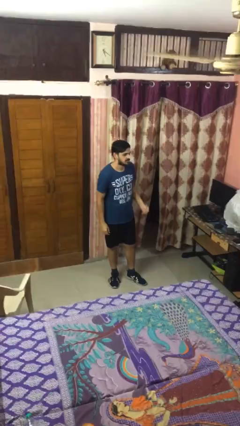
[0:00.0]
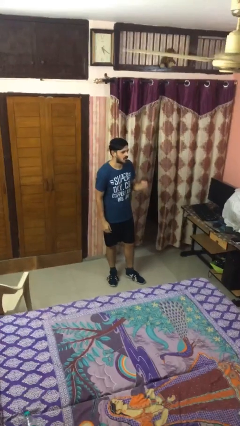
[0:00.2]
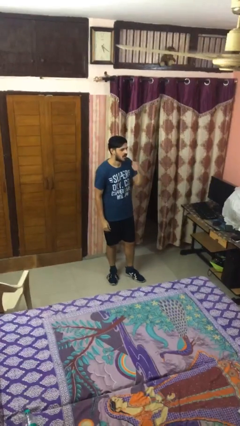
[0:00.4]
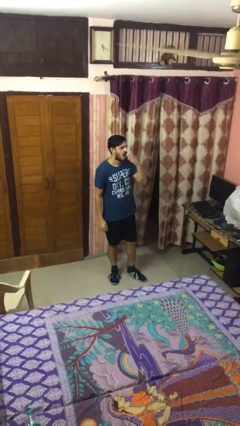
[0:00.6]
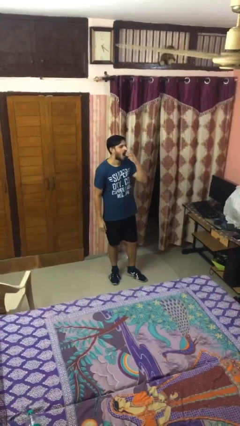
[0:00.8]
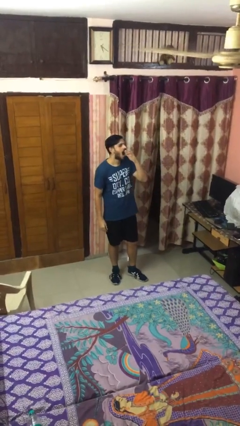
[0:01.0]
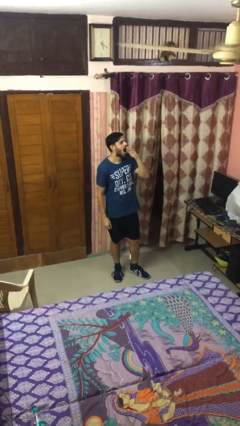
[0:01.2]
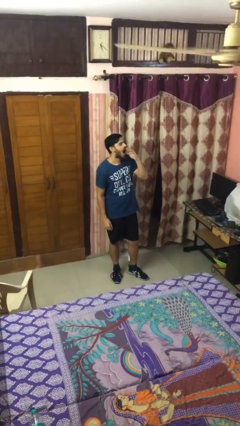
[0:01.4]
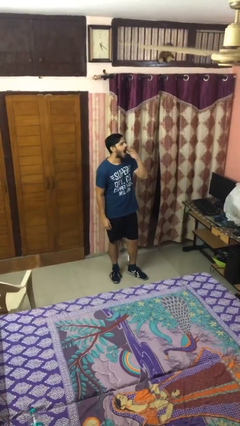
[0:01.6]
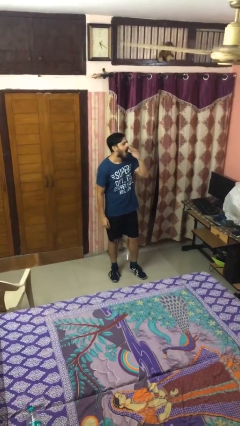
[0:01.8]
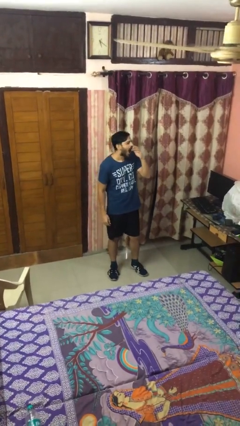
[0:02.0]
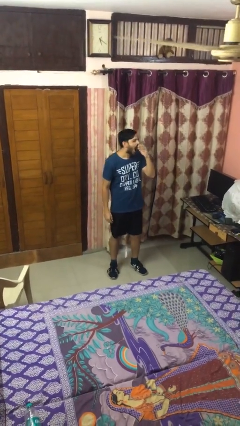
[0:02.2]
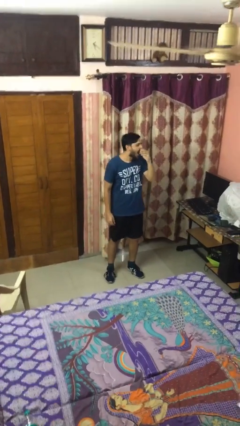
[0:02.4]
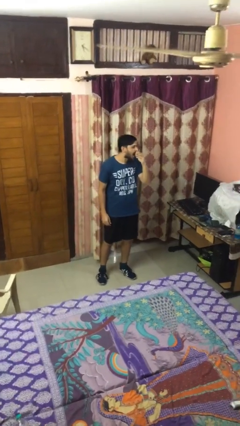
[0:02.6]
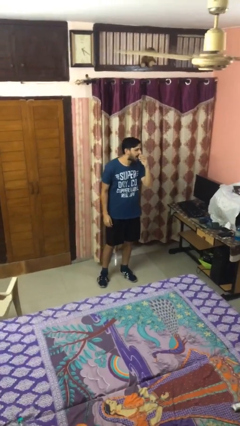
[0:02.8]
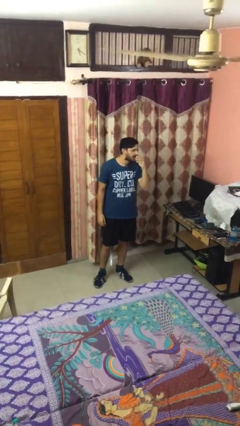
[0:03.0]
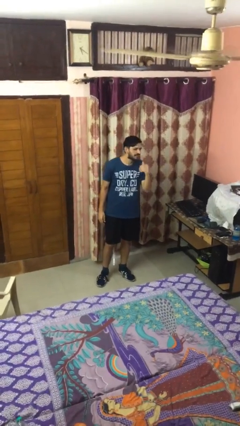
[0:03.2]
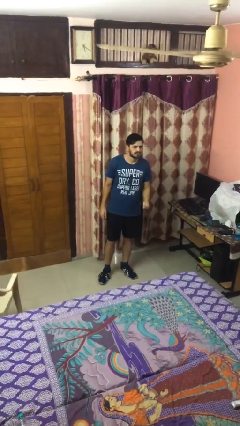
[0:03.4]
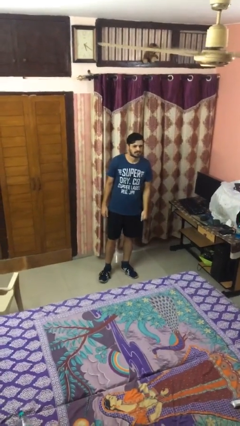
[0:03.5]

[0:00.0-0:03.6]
person yawns

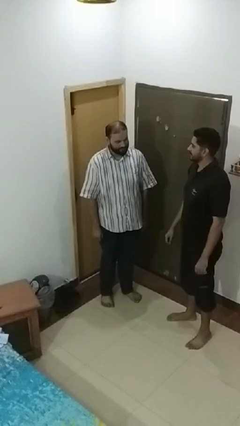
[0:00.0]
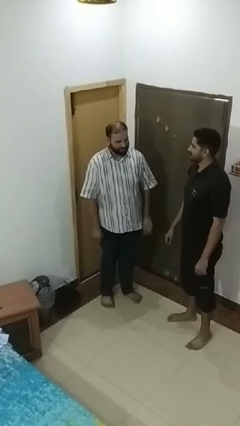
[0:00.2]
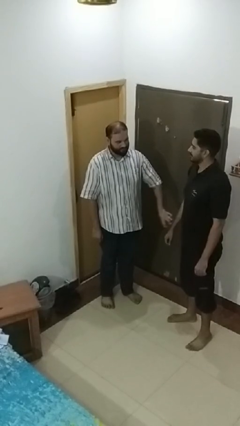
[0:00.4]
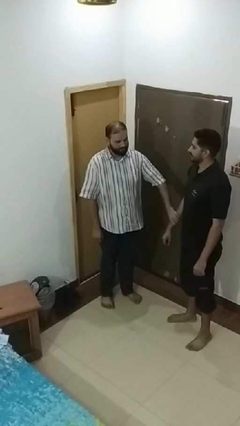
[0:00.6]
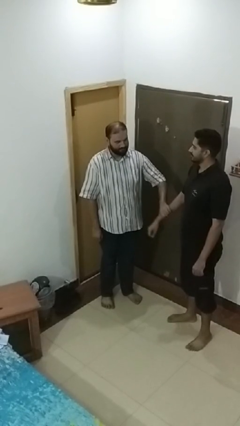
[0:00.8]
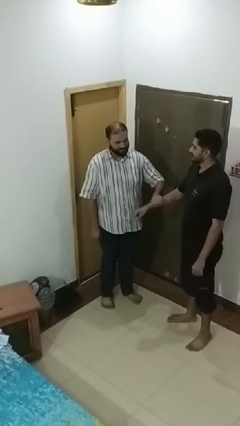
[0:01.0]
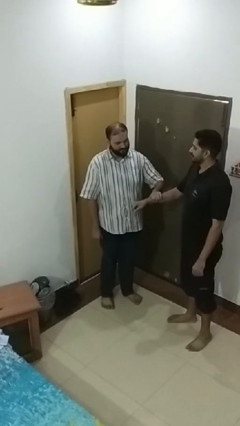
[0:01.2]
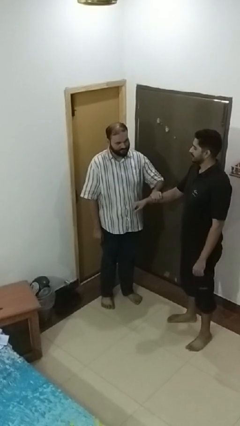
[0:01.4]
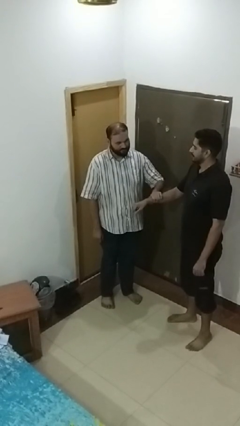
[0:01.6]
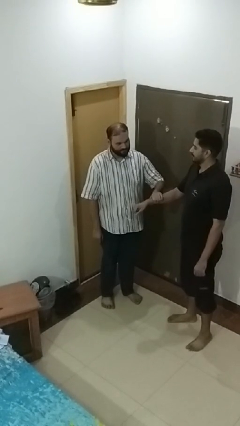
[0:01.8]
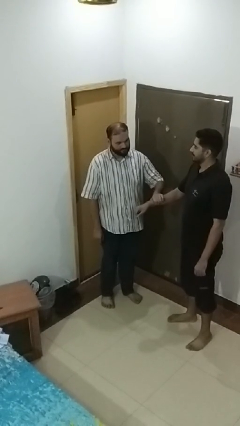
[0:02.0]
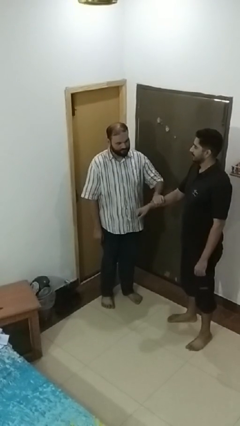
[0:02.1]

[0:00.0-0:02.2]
person grabs person by forearm

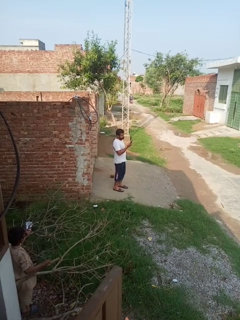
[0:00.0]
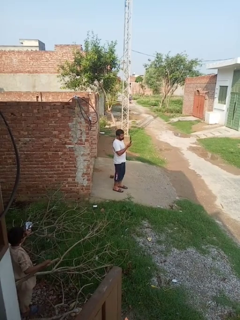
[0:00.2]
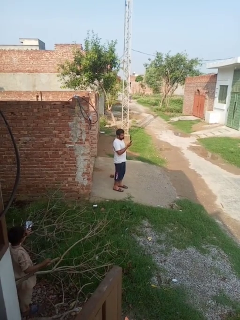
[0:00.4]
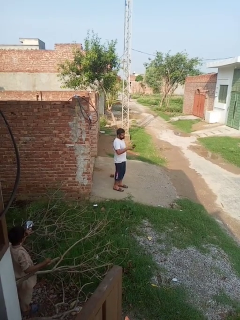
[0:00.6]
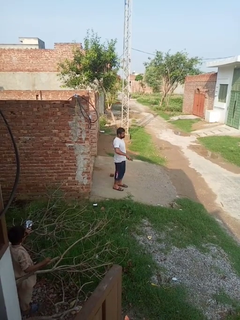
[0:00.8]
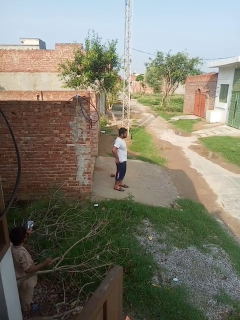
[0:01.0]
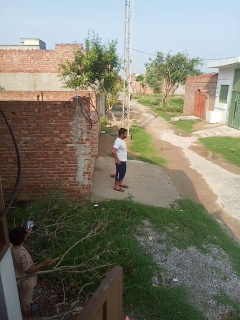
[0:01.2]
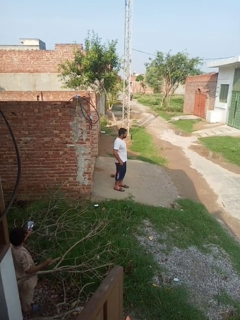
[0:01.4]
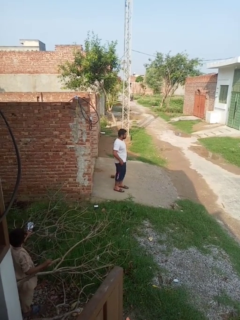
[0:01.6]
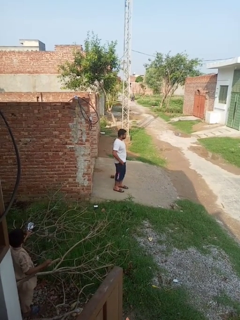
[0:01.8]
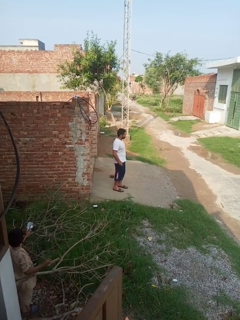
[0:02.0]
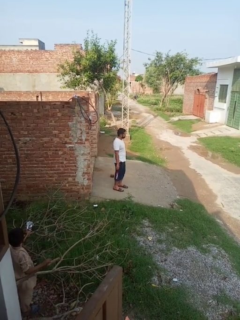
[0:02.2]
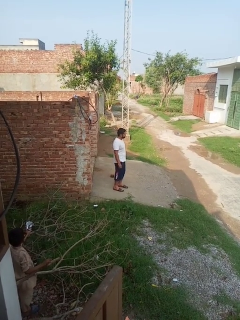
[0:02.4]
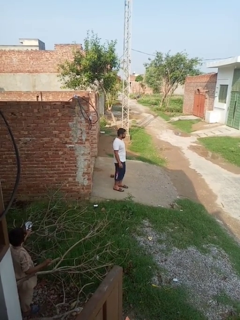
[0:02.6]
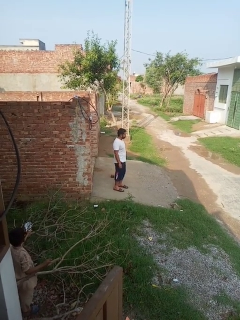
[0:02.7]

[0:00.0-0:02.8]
person puts phone into pocket

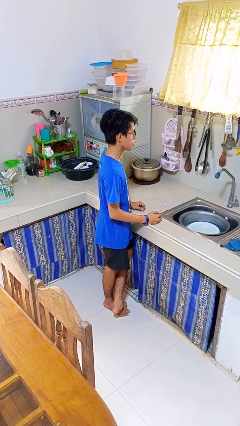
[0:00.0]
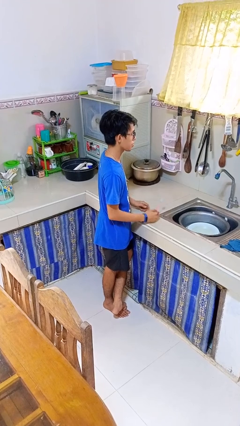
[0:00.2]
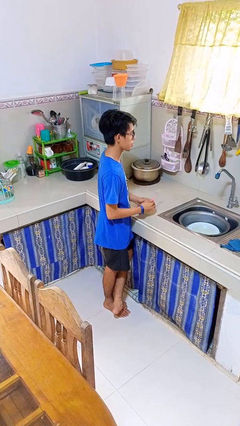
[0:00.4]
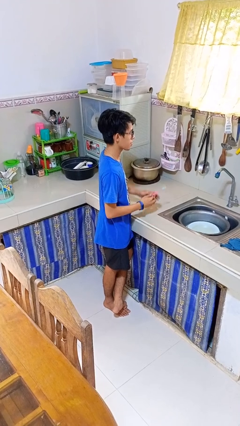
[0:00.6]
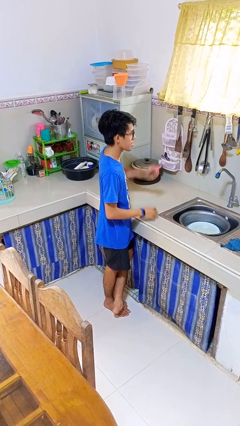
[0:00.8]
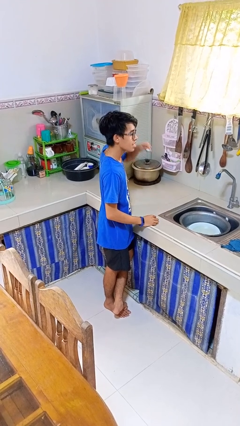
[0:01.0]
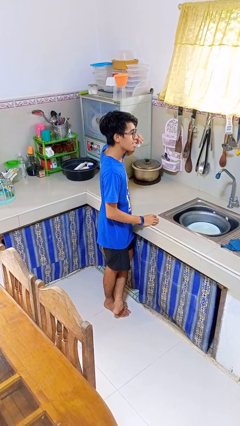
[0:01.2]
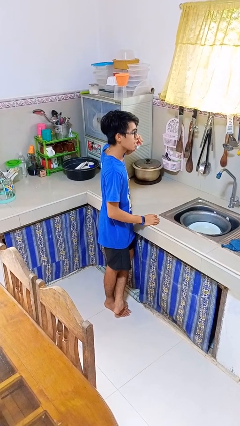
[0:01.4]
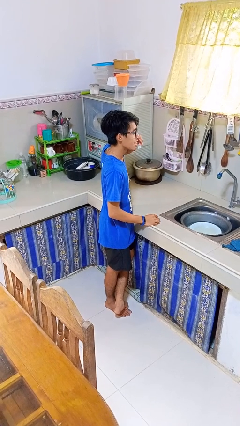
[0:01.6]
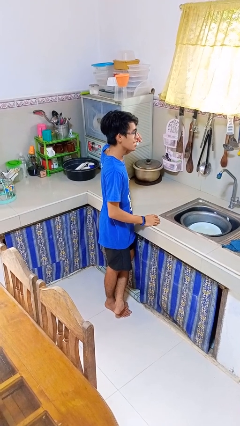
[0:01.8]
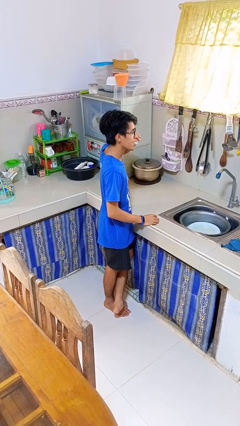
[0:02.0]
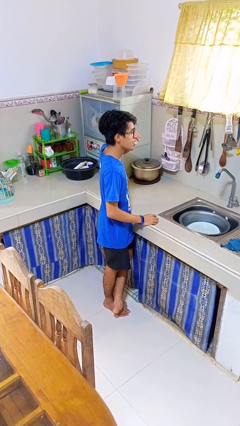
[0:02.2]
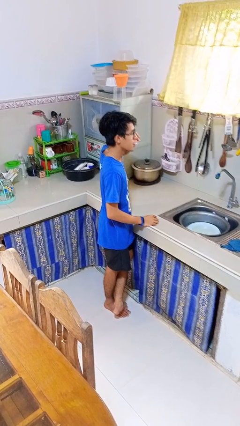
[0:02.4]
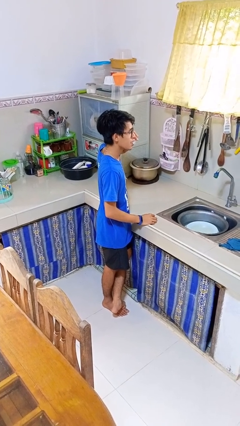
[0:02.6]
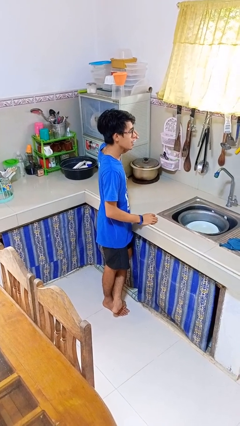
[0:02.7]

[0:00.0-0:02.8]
person brushes teeth

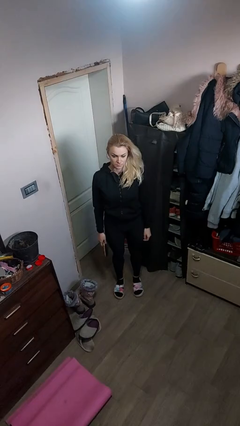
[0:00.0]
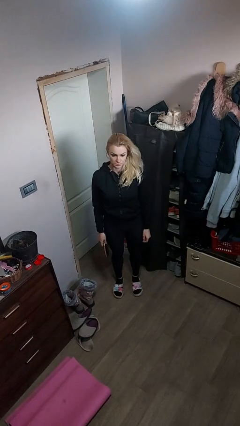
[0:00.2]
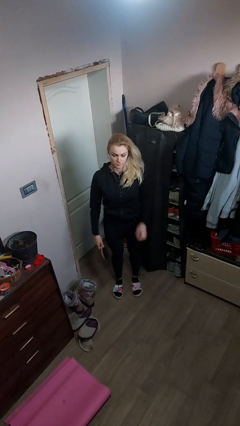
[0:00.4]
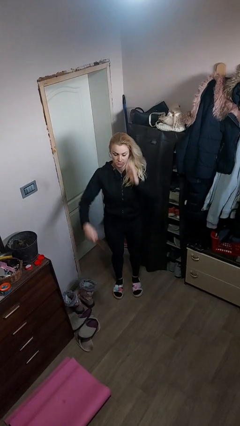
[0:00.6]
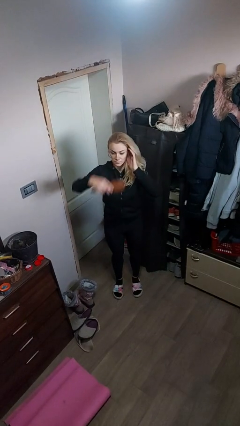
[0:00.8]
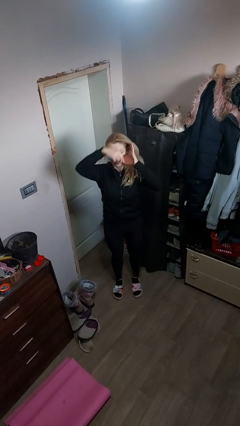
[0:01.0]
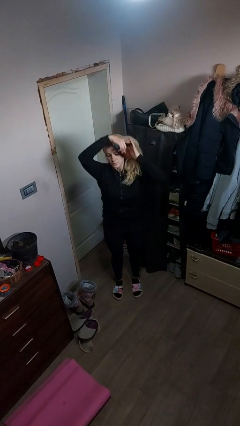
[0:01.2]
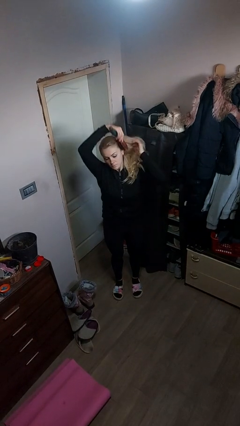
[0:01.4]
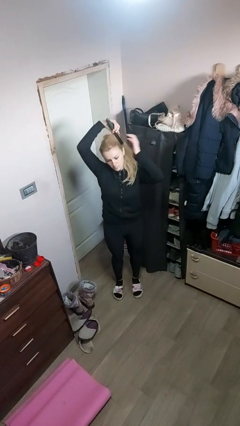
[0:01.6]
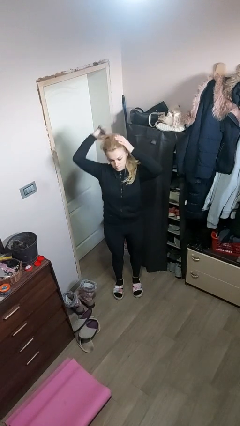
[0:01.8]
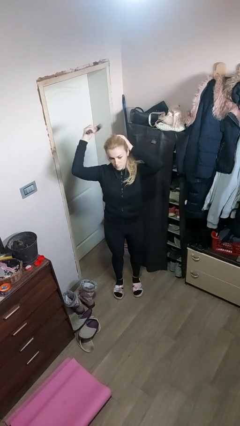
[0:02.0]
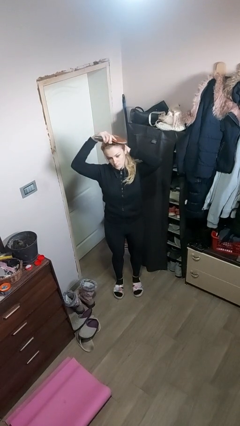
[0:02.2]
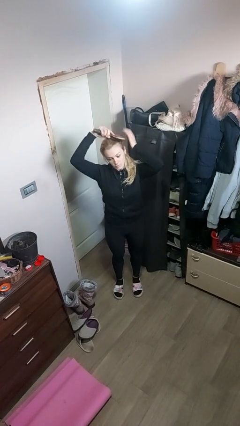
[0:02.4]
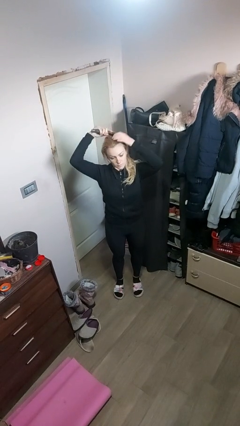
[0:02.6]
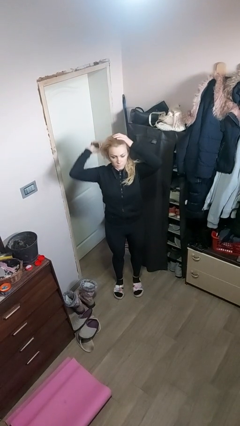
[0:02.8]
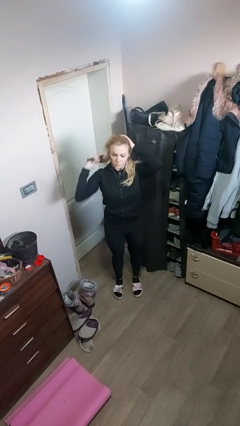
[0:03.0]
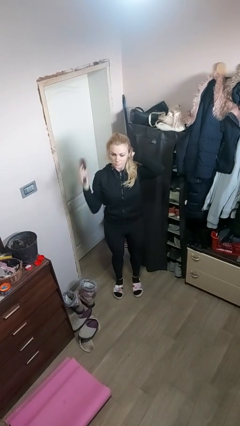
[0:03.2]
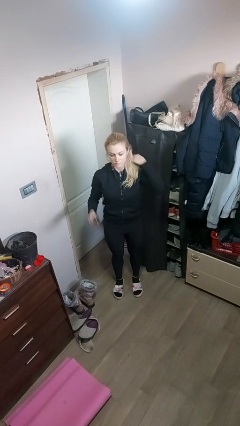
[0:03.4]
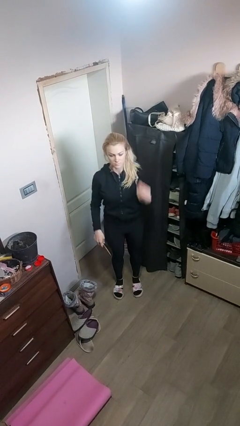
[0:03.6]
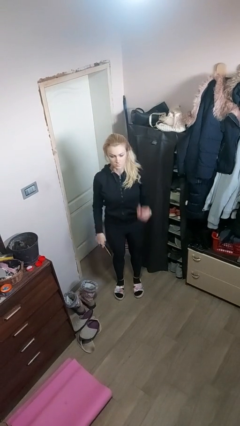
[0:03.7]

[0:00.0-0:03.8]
person brushes hair

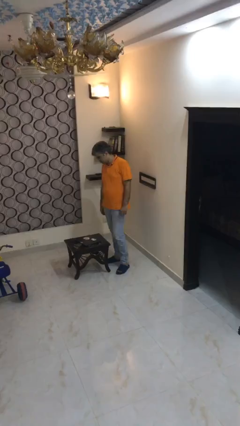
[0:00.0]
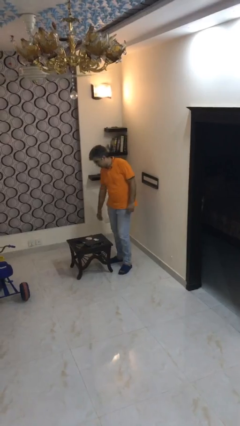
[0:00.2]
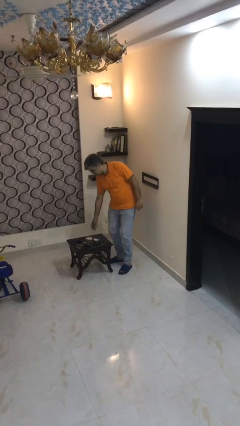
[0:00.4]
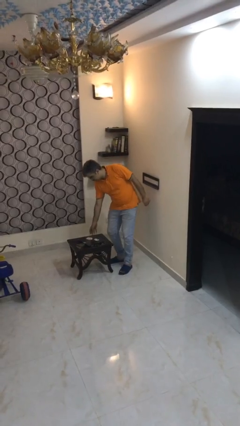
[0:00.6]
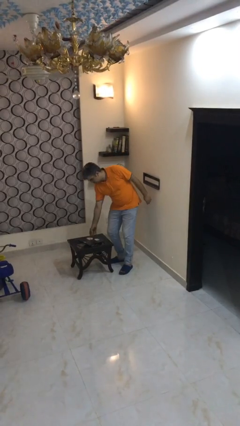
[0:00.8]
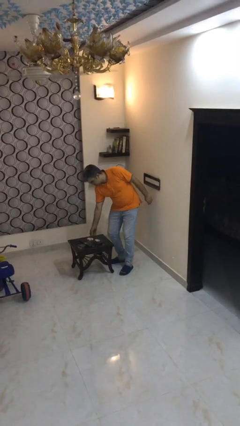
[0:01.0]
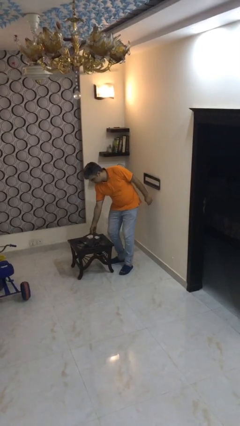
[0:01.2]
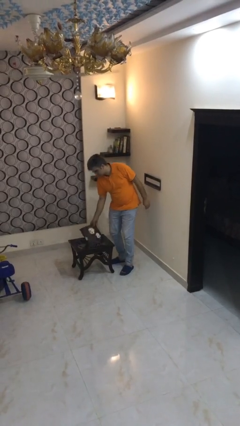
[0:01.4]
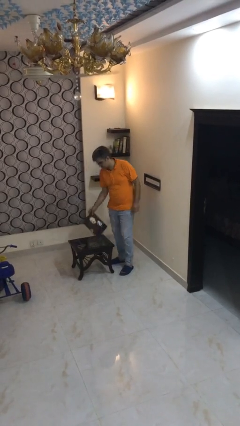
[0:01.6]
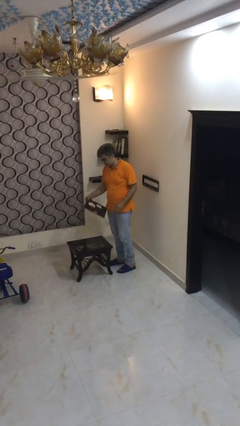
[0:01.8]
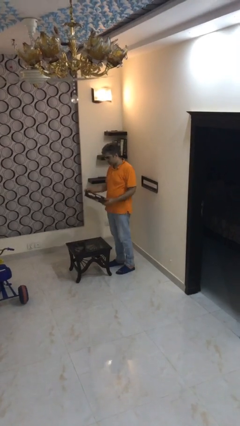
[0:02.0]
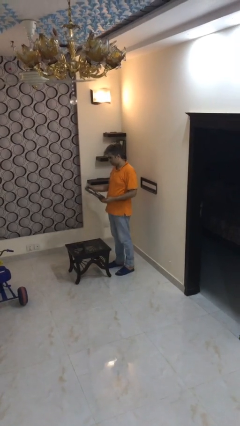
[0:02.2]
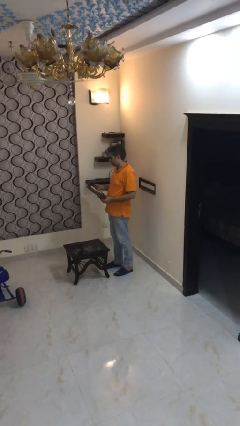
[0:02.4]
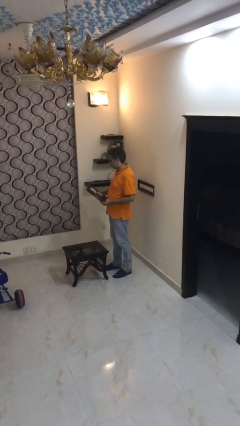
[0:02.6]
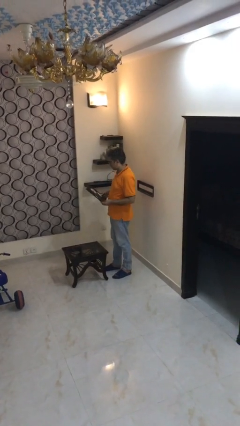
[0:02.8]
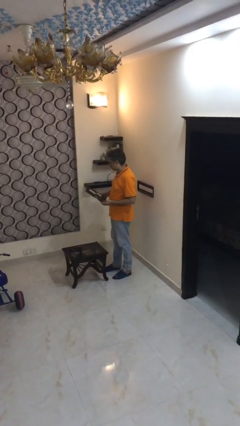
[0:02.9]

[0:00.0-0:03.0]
person picks up object from table
